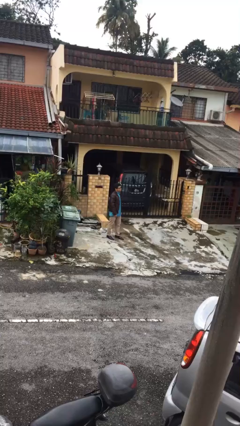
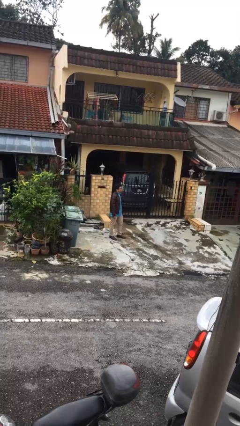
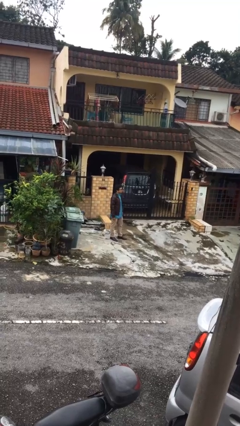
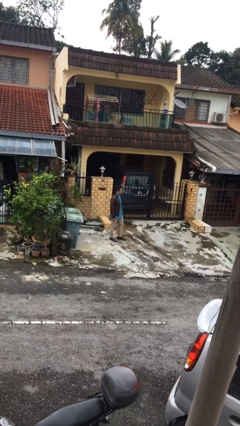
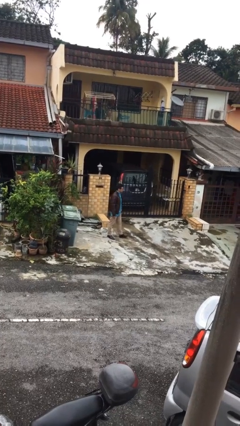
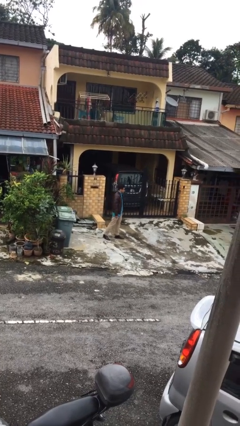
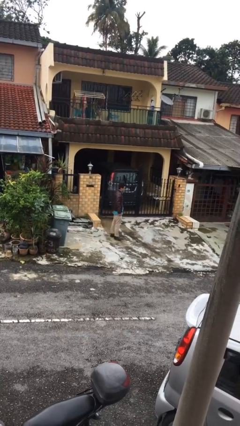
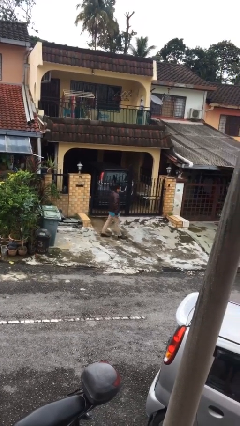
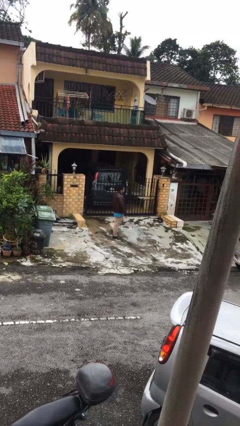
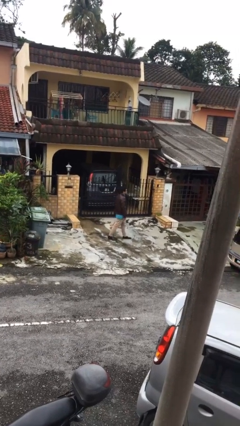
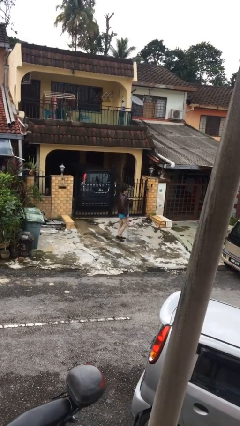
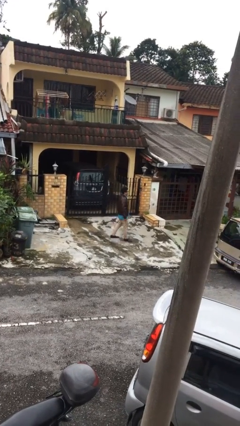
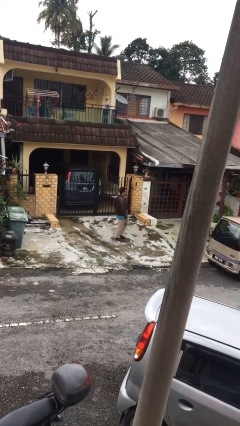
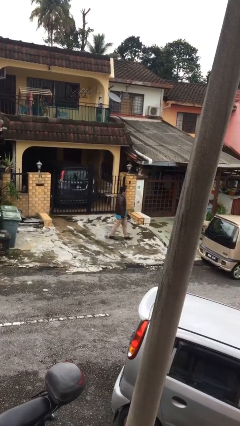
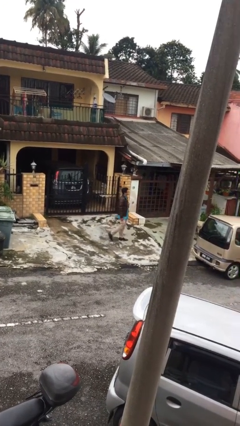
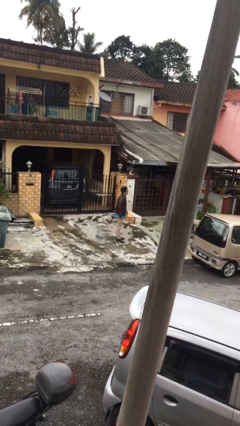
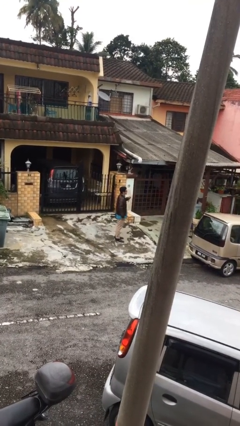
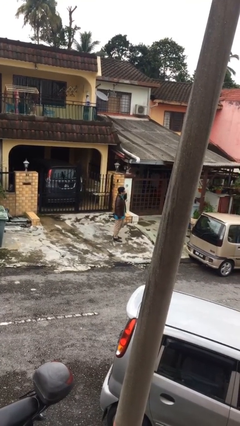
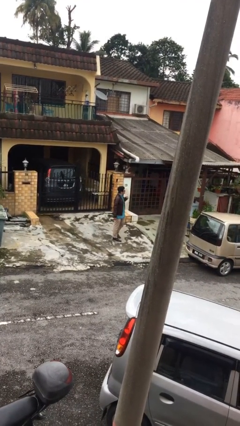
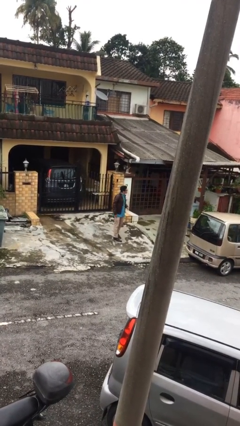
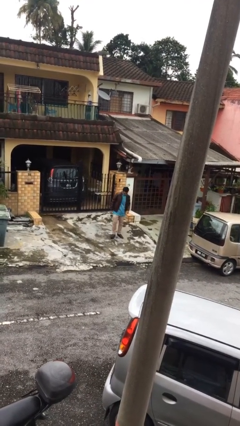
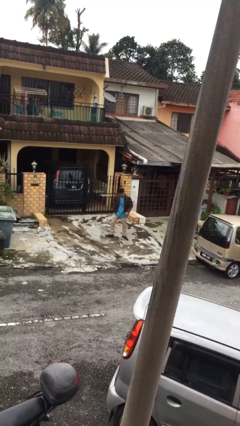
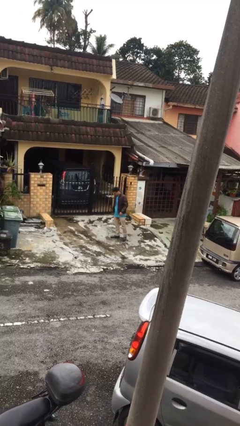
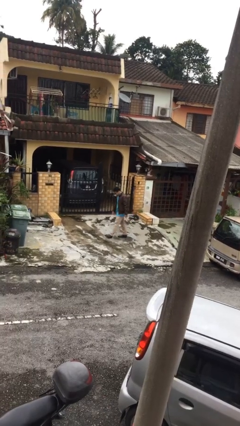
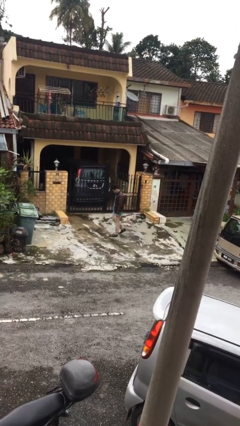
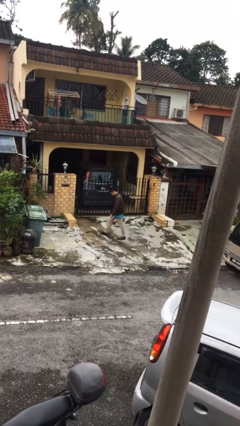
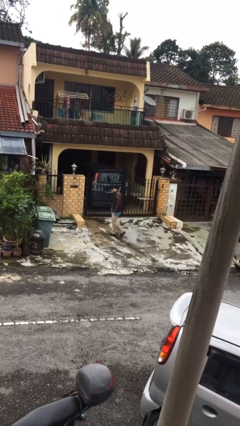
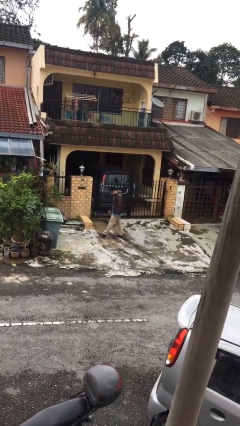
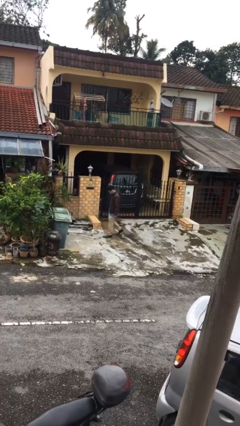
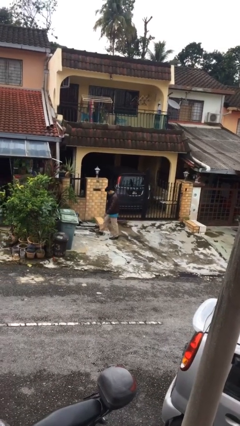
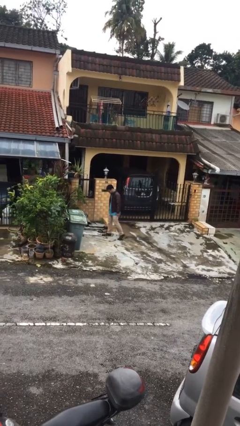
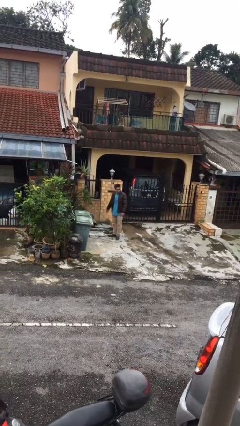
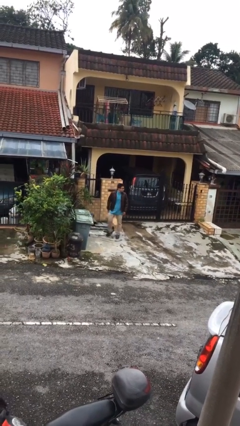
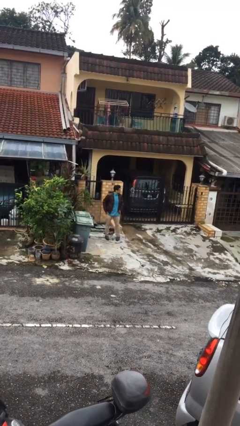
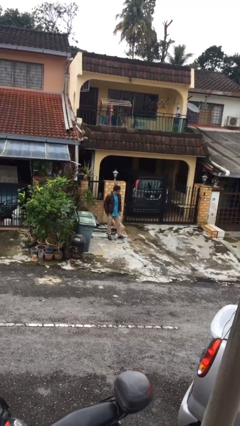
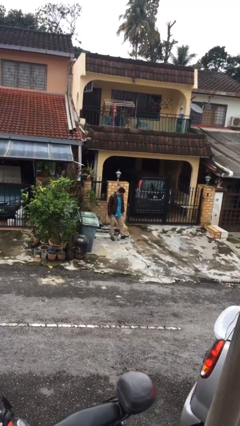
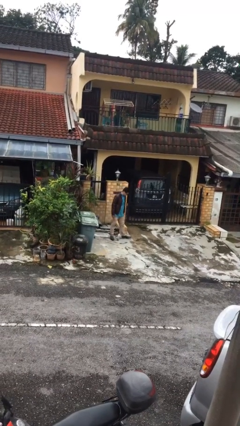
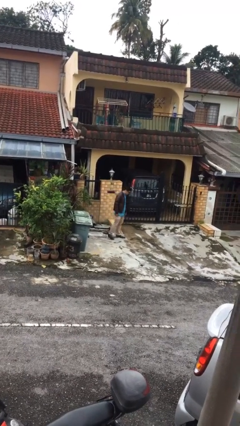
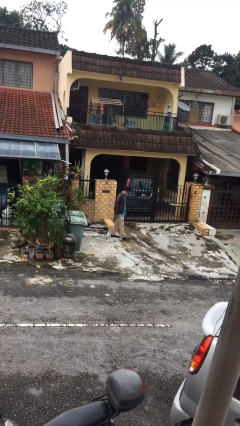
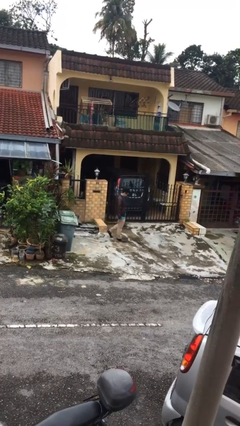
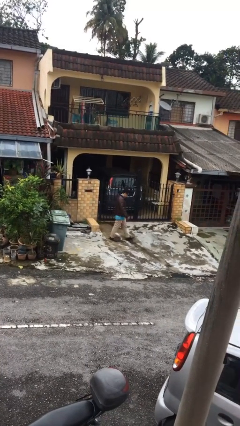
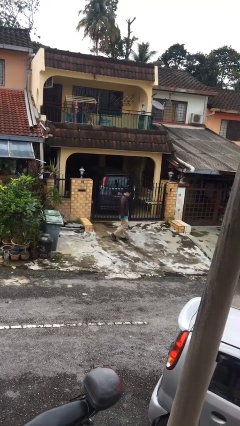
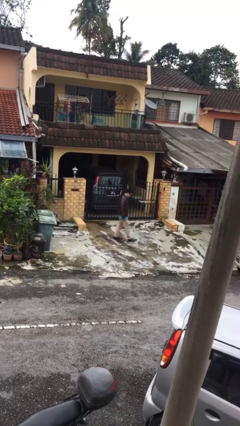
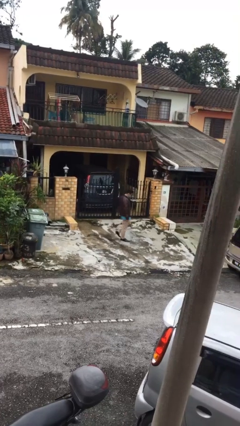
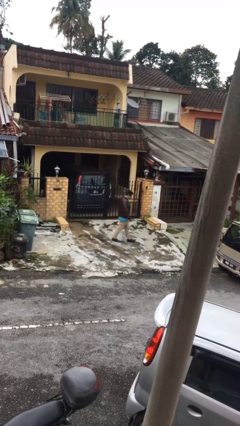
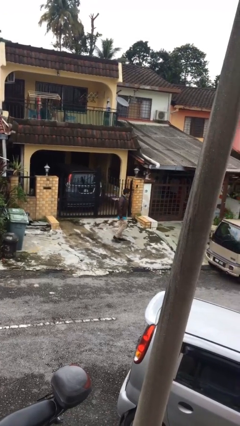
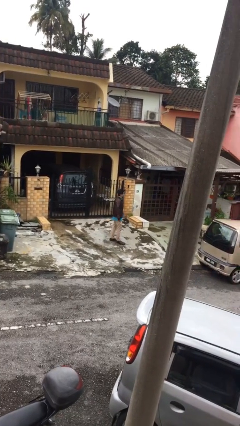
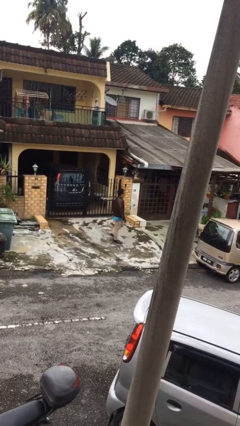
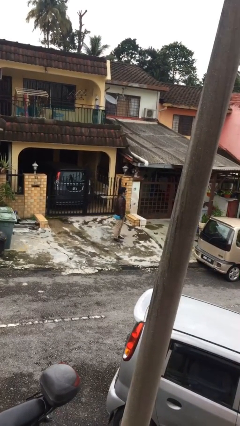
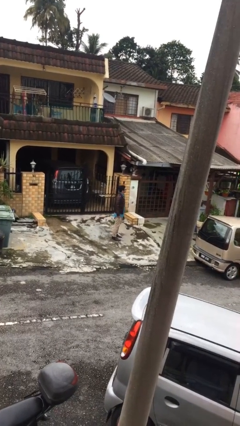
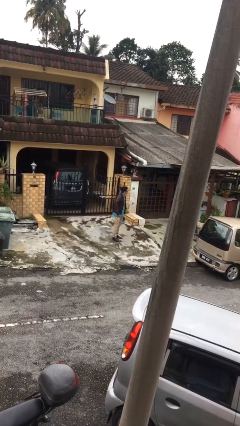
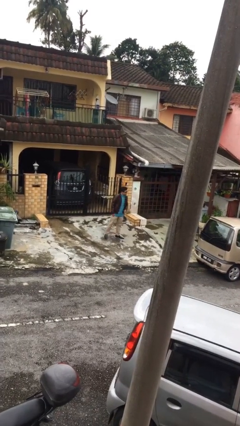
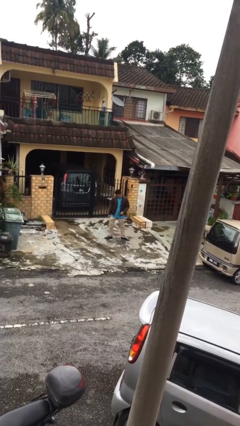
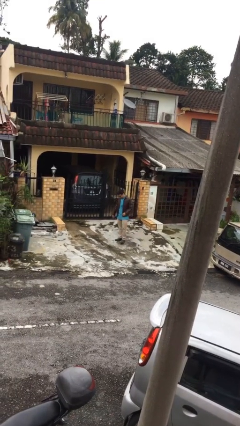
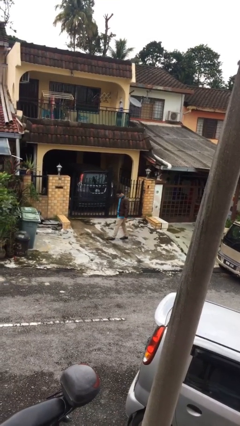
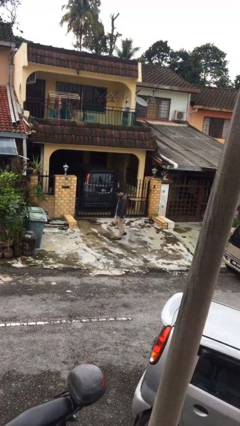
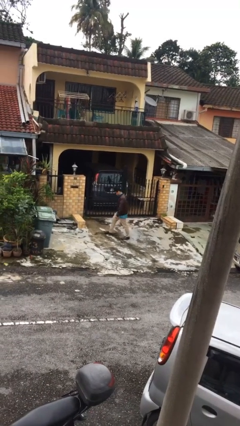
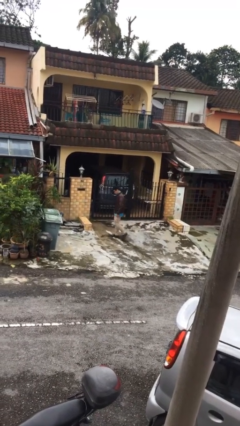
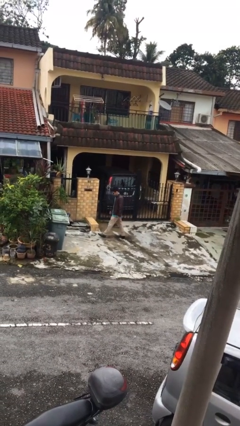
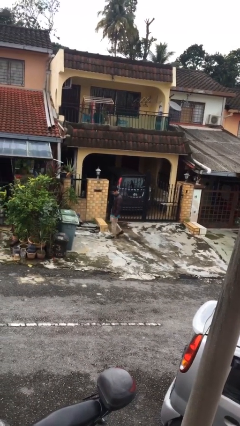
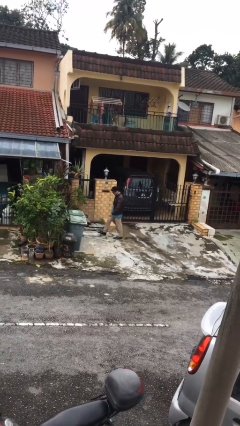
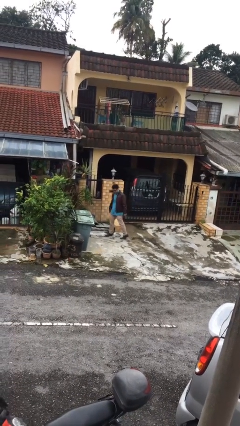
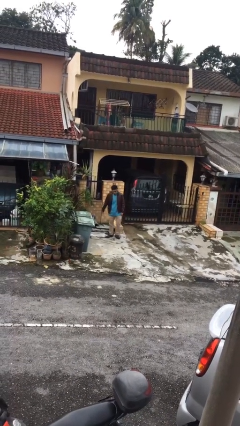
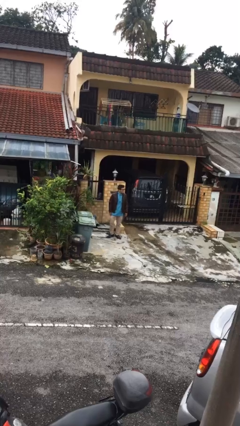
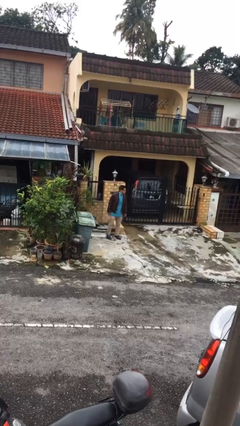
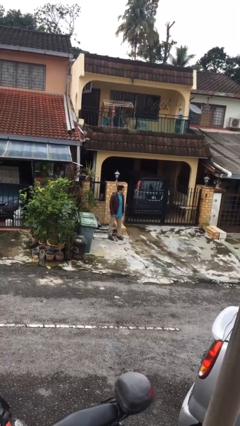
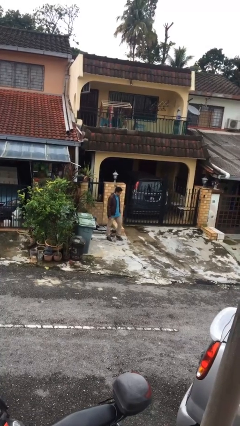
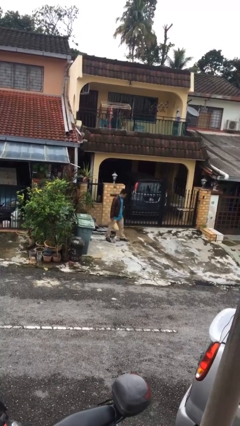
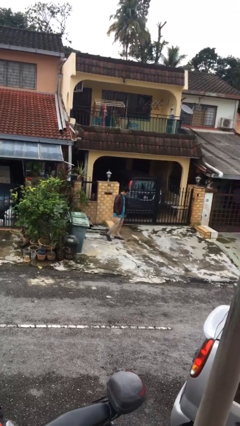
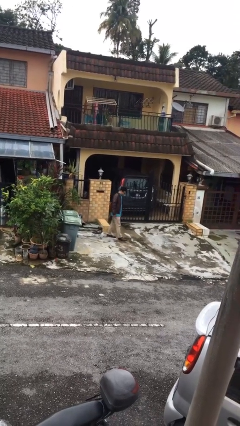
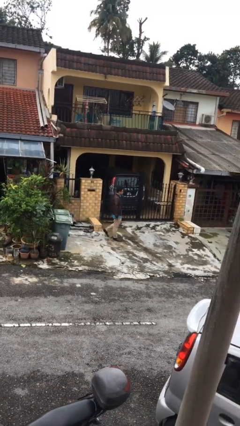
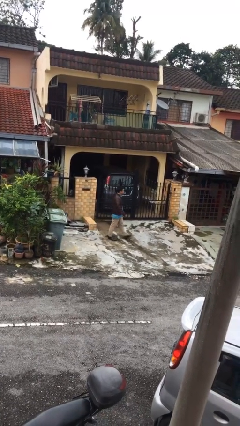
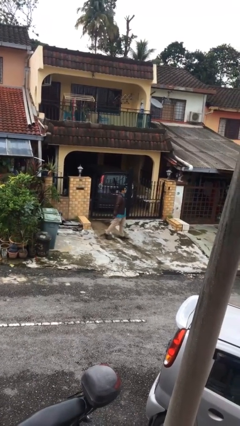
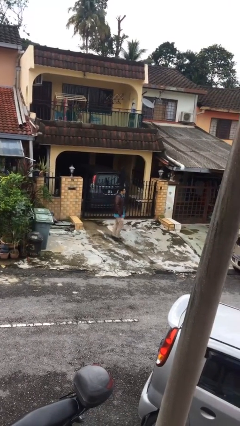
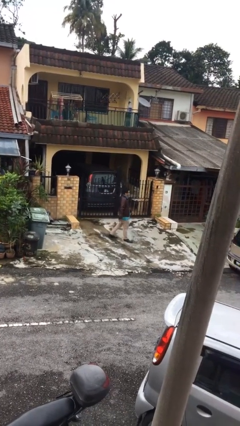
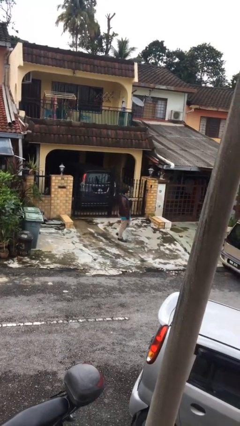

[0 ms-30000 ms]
person walks

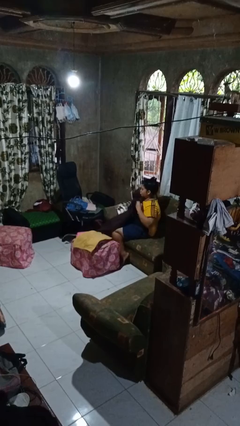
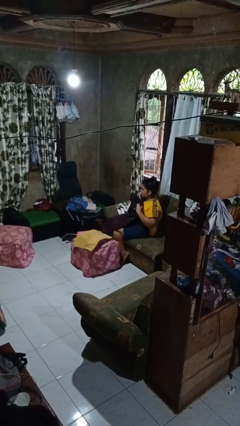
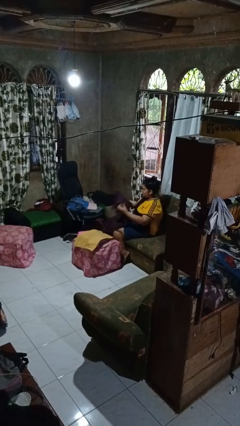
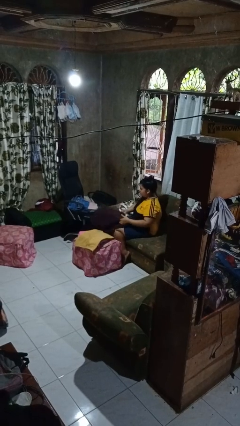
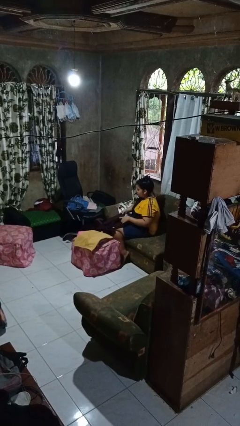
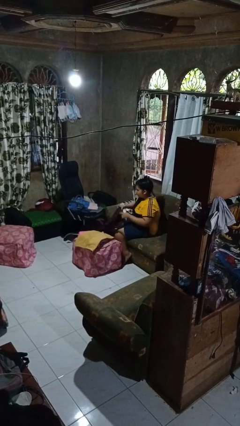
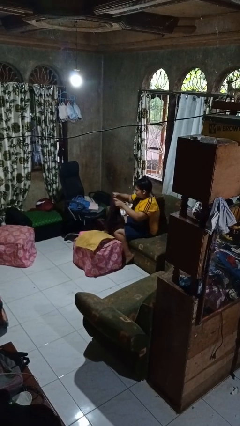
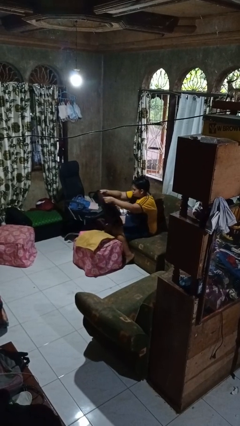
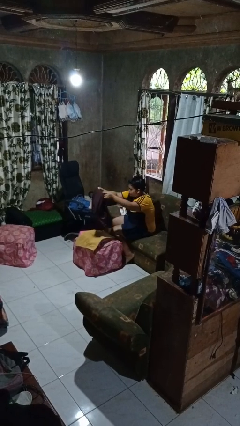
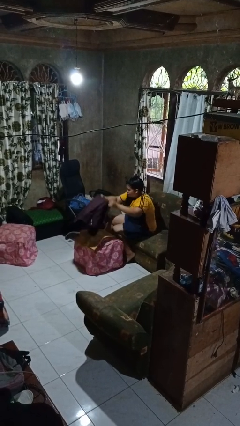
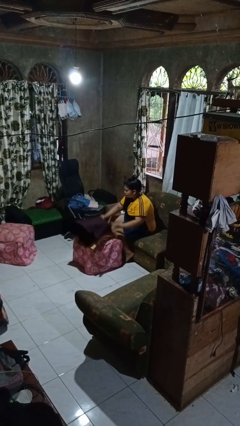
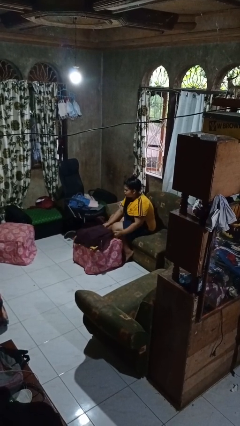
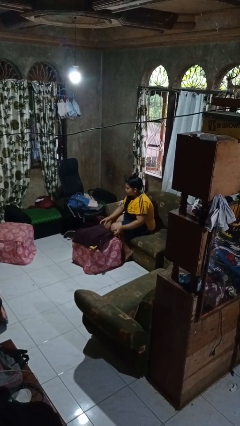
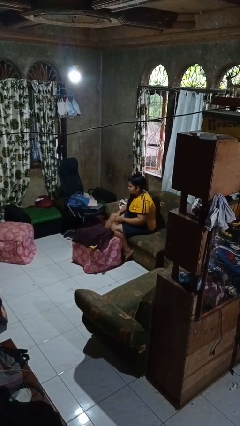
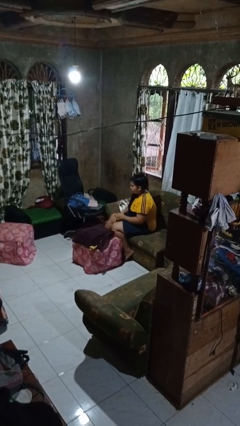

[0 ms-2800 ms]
person folds pants

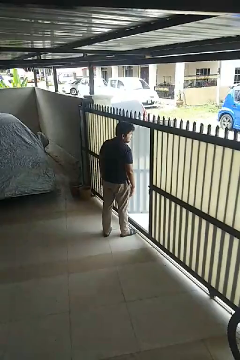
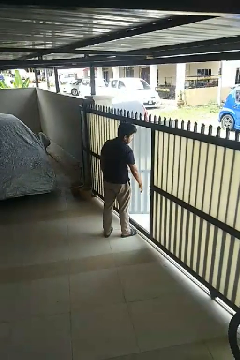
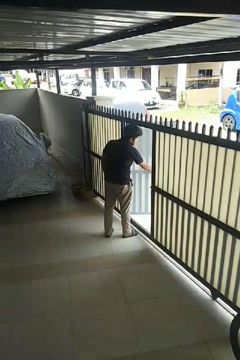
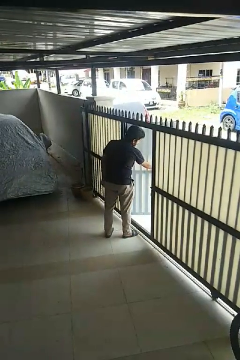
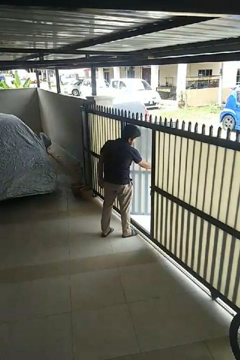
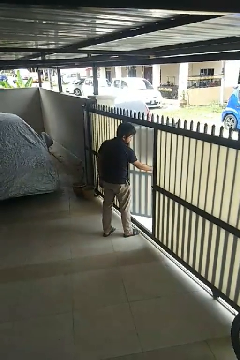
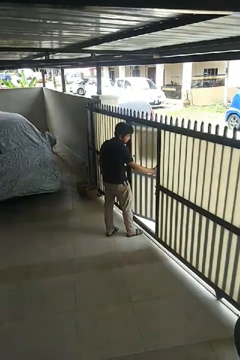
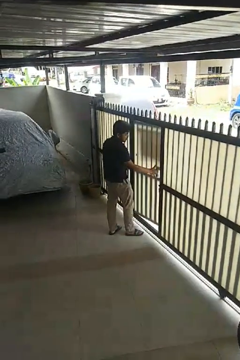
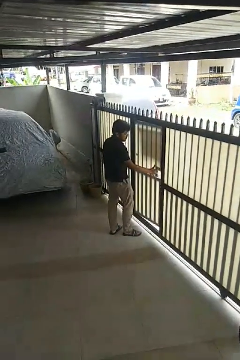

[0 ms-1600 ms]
person closes gate
